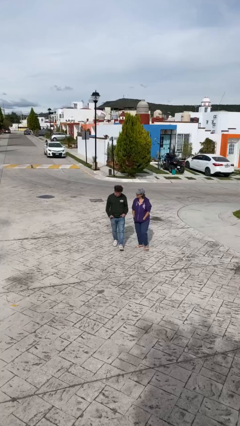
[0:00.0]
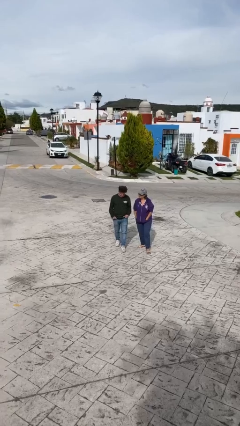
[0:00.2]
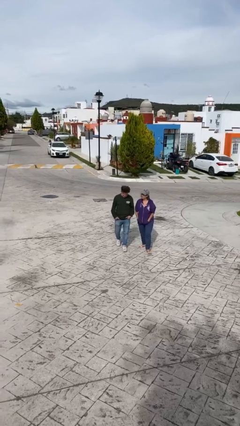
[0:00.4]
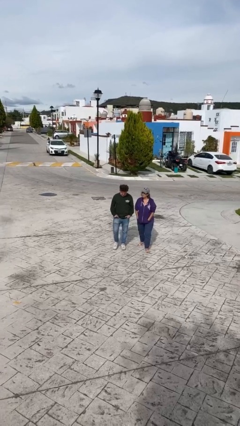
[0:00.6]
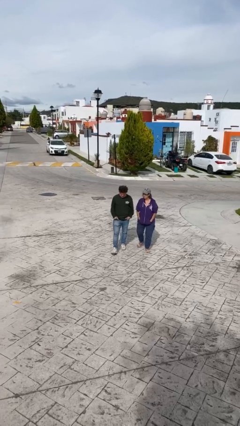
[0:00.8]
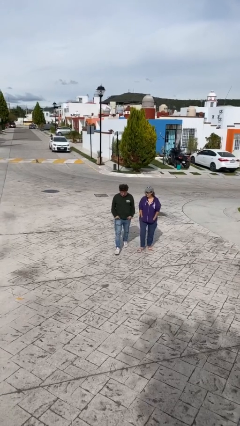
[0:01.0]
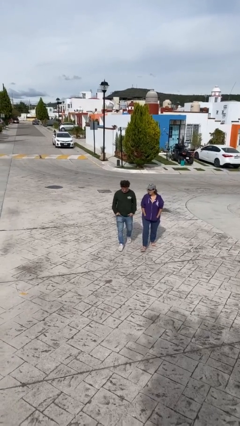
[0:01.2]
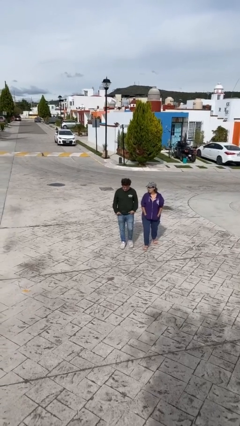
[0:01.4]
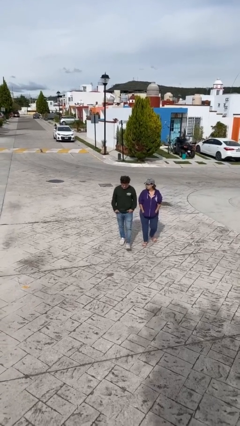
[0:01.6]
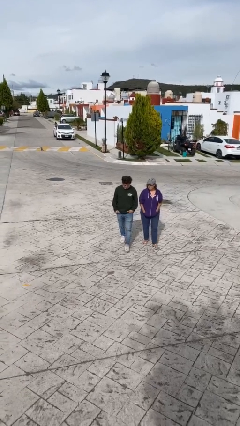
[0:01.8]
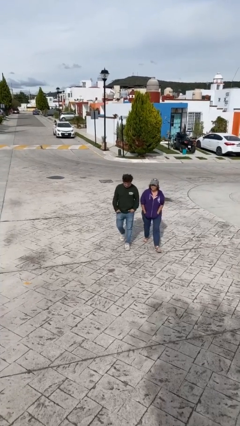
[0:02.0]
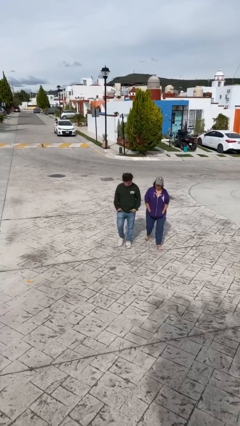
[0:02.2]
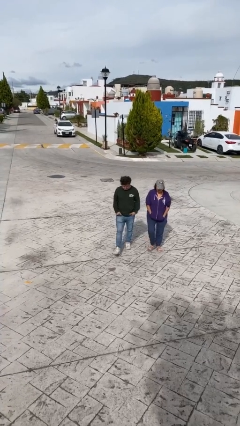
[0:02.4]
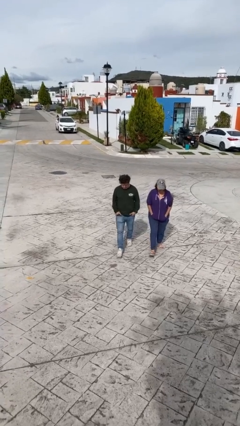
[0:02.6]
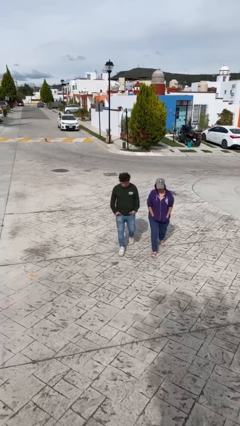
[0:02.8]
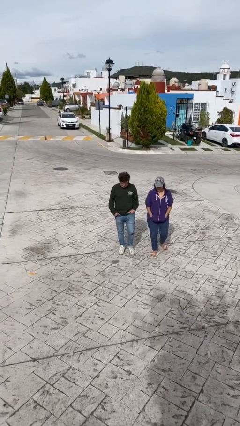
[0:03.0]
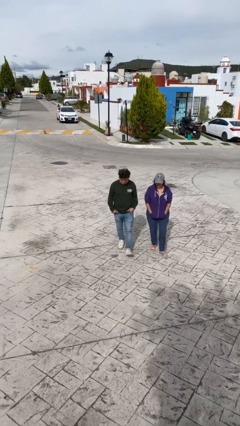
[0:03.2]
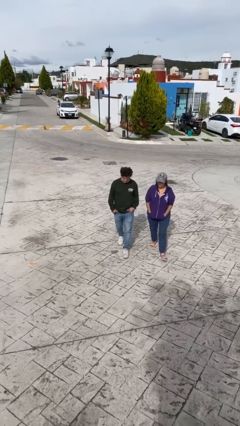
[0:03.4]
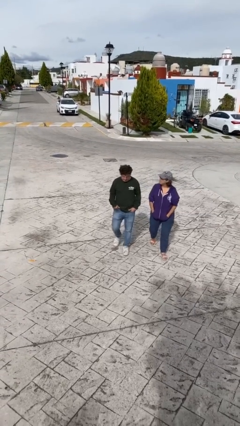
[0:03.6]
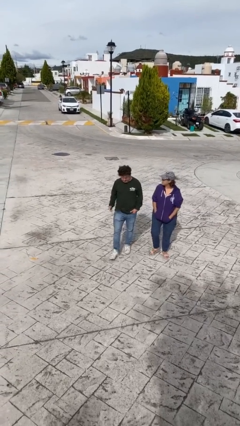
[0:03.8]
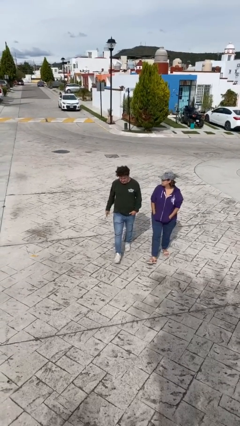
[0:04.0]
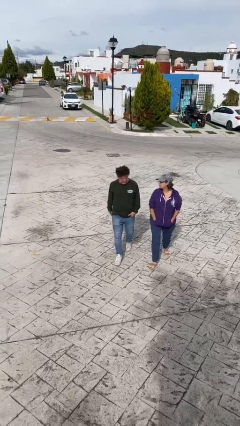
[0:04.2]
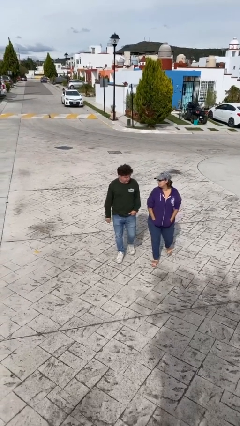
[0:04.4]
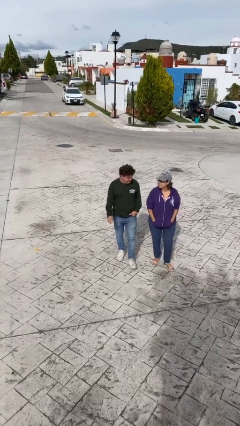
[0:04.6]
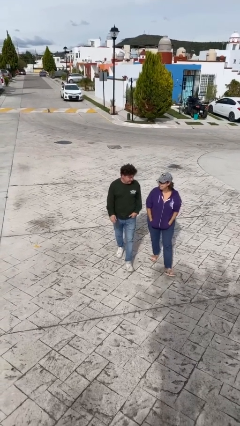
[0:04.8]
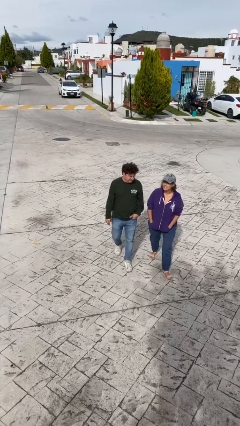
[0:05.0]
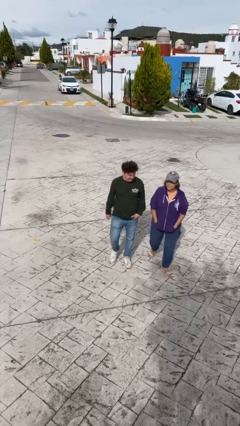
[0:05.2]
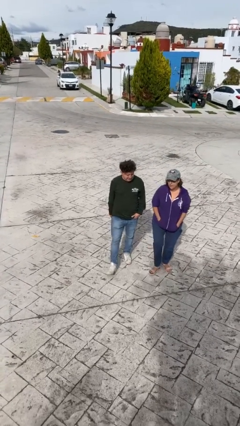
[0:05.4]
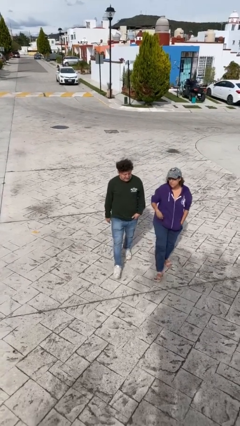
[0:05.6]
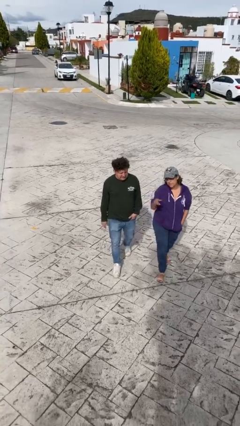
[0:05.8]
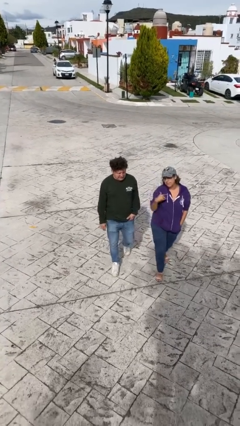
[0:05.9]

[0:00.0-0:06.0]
person talks to person

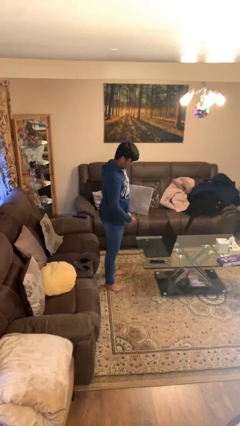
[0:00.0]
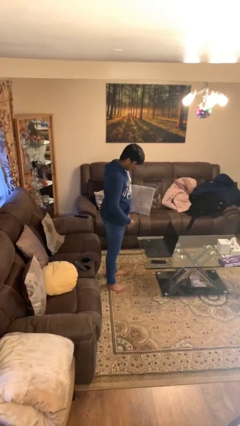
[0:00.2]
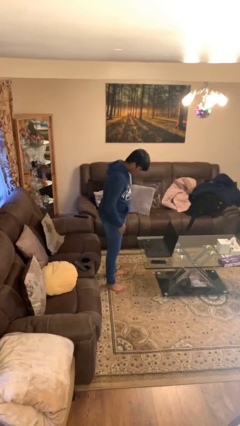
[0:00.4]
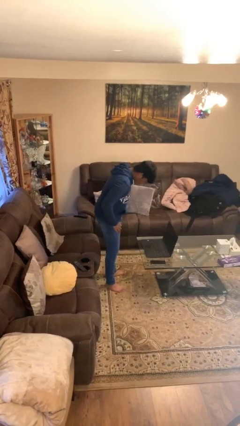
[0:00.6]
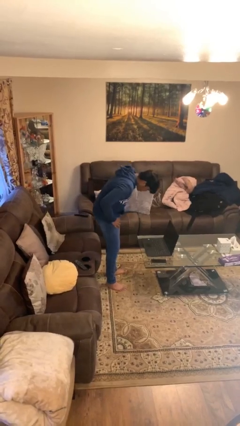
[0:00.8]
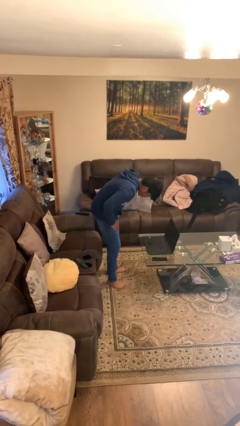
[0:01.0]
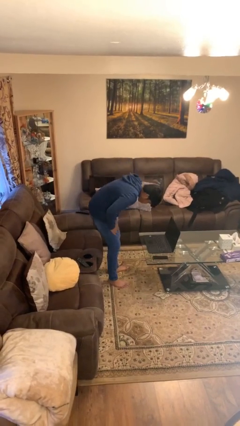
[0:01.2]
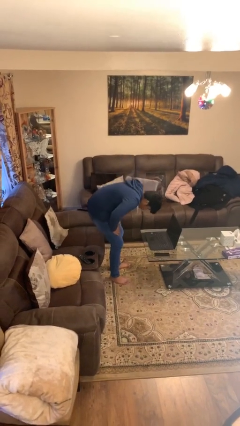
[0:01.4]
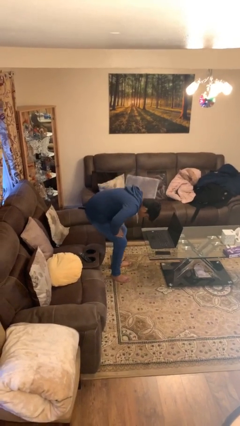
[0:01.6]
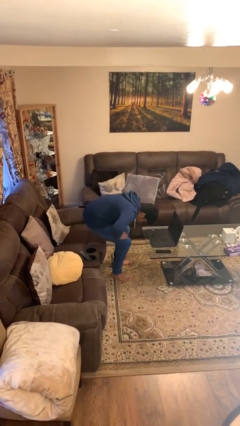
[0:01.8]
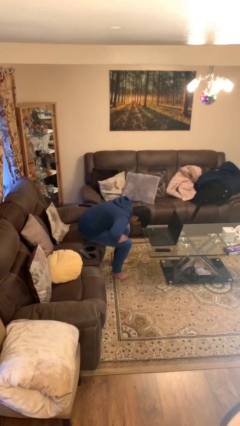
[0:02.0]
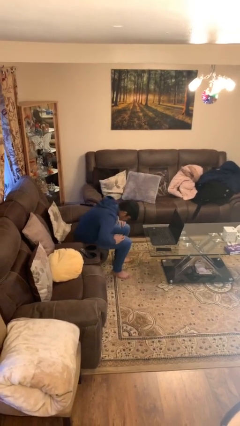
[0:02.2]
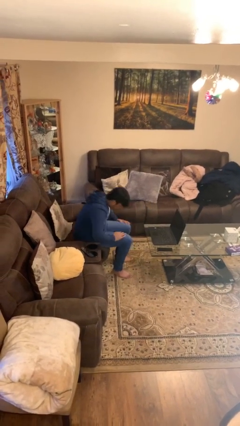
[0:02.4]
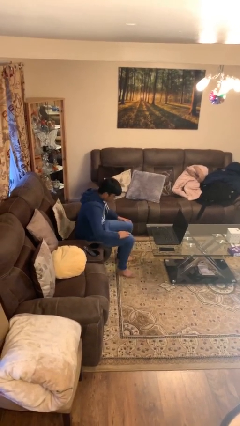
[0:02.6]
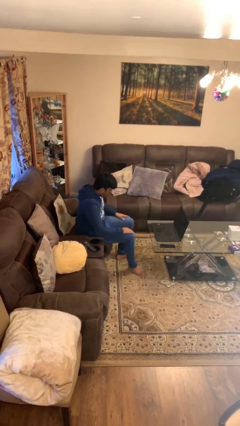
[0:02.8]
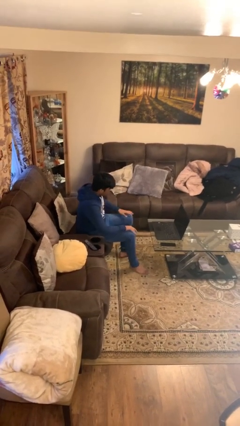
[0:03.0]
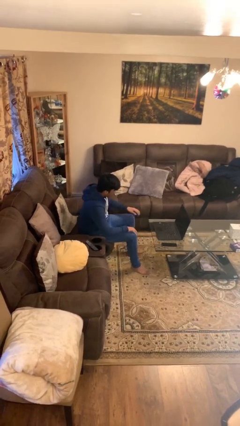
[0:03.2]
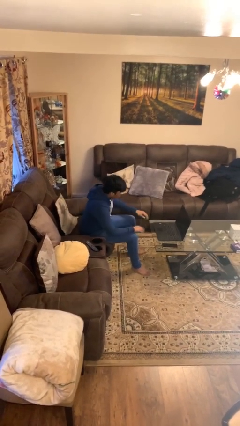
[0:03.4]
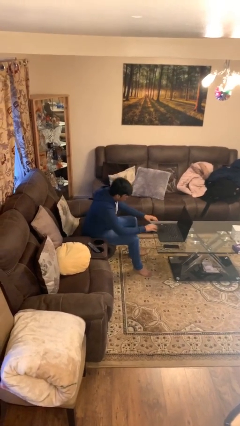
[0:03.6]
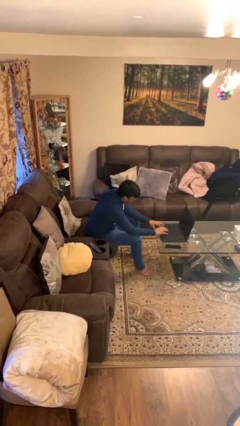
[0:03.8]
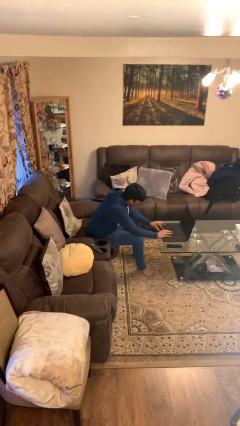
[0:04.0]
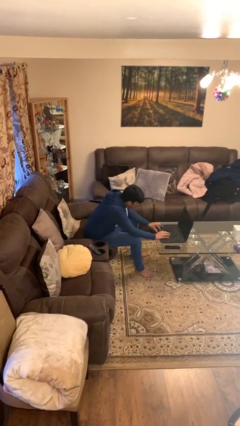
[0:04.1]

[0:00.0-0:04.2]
person sits down

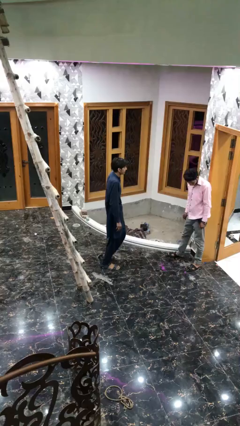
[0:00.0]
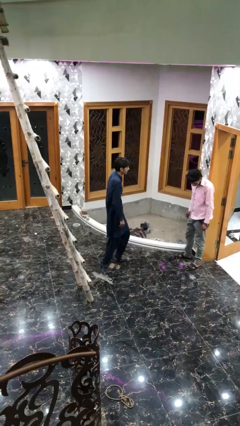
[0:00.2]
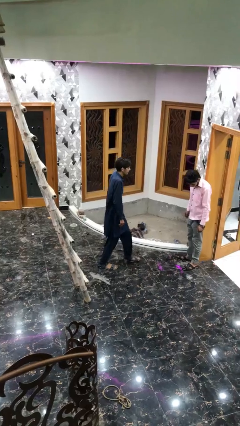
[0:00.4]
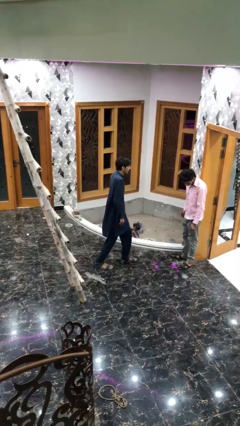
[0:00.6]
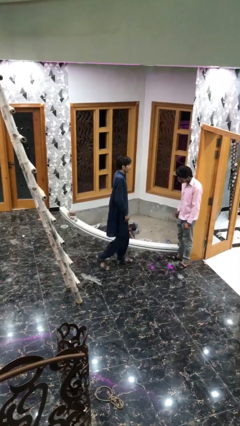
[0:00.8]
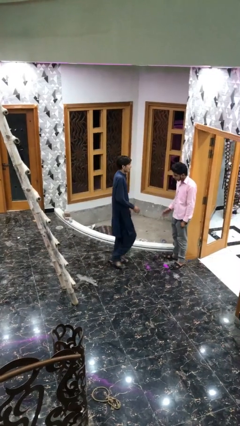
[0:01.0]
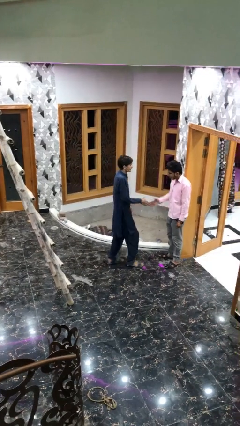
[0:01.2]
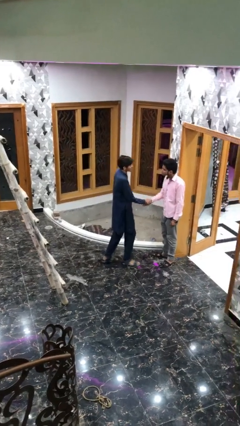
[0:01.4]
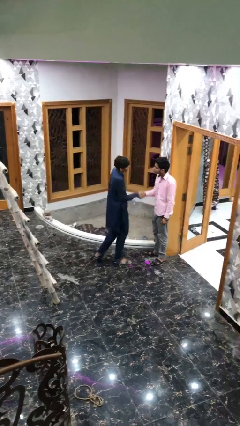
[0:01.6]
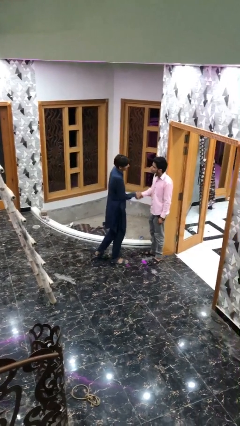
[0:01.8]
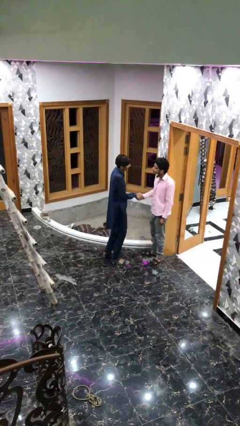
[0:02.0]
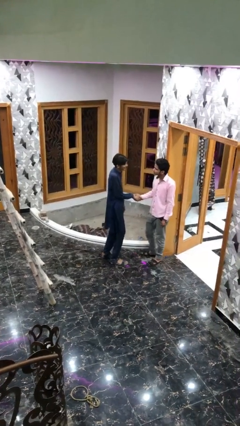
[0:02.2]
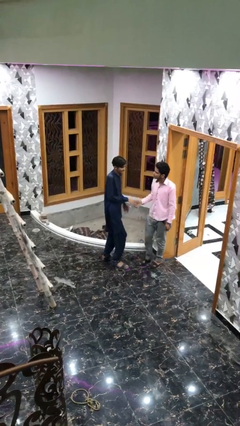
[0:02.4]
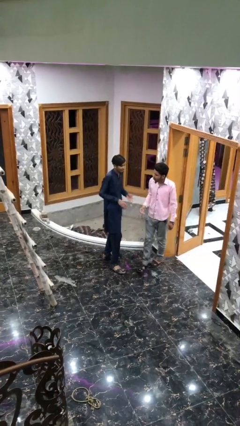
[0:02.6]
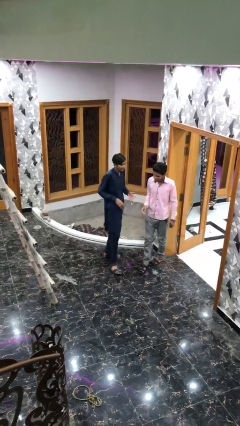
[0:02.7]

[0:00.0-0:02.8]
person shakes hand

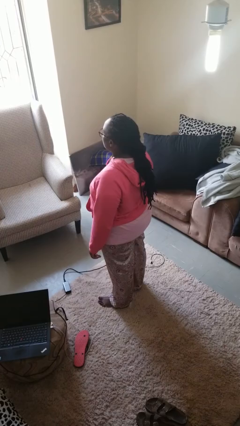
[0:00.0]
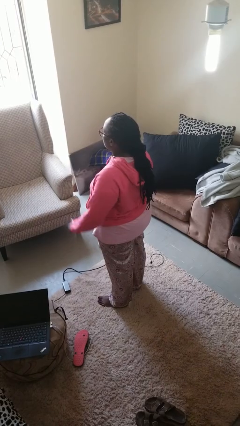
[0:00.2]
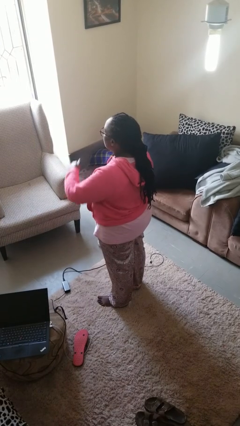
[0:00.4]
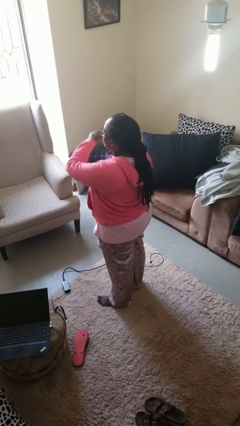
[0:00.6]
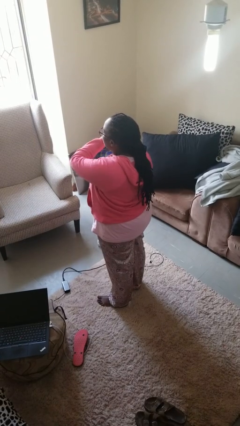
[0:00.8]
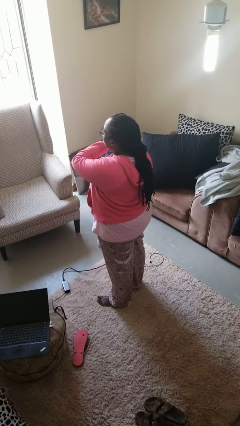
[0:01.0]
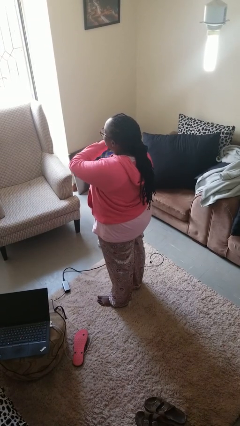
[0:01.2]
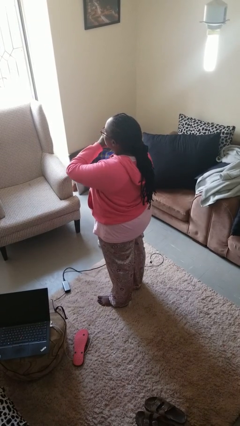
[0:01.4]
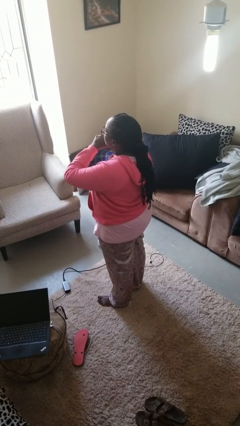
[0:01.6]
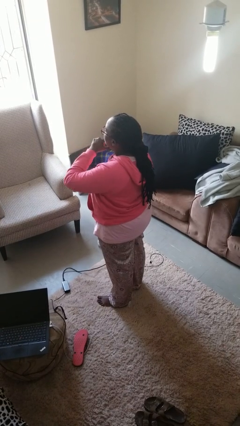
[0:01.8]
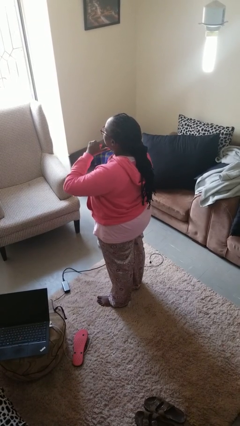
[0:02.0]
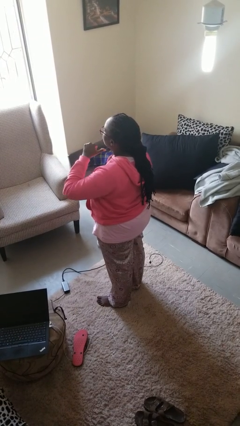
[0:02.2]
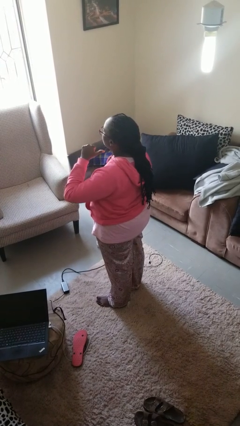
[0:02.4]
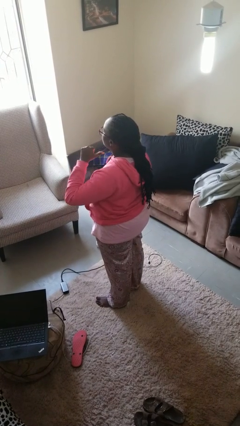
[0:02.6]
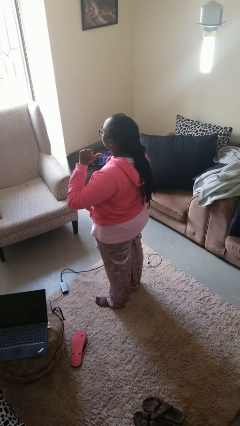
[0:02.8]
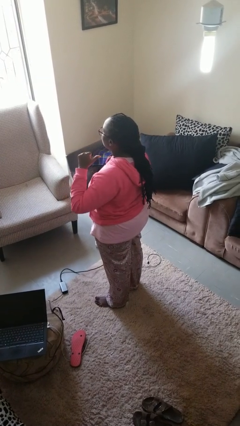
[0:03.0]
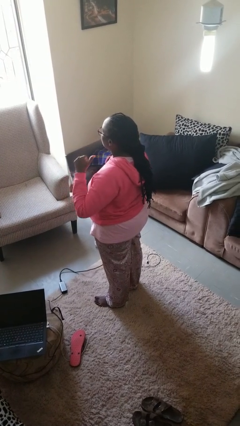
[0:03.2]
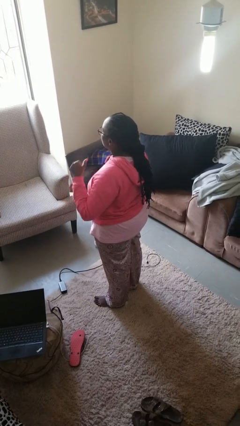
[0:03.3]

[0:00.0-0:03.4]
person gestures cut

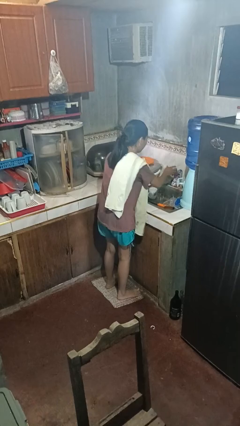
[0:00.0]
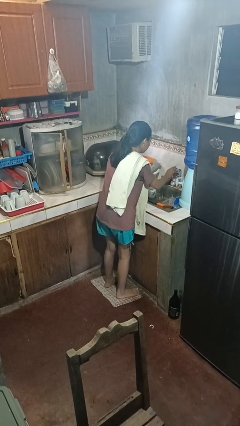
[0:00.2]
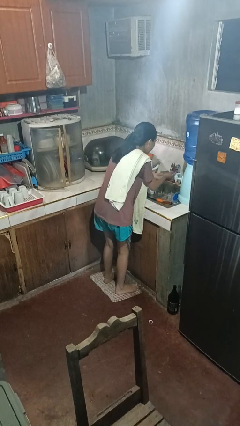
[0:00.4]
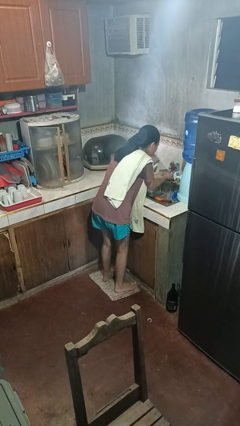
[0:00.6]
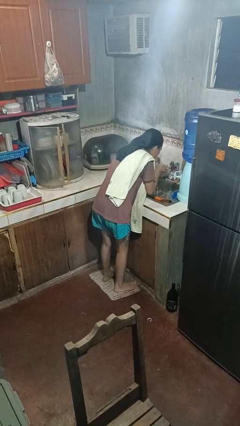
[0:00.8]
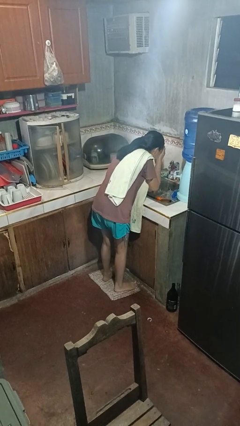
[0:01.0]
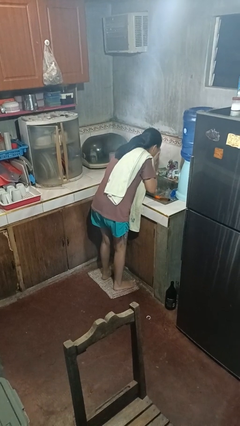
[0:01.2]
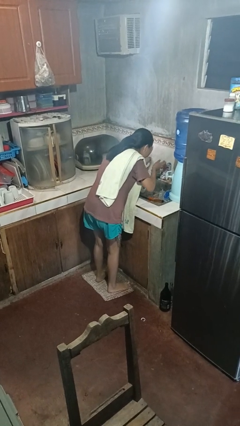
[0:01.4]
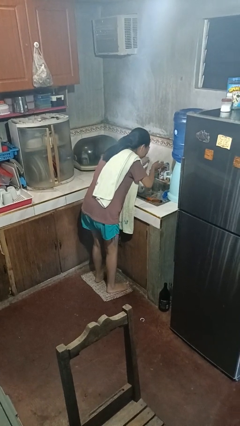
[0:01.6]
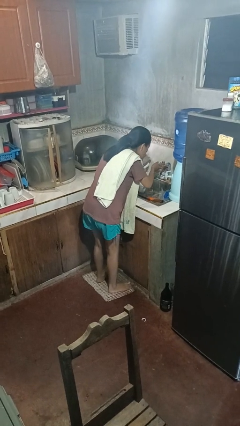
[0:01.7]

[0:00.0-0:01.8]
person washes face
